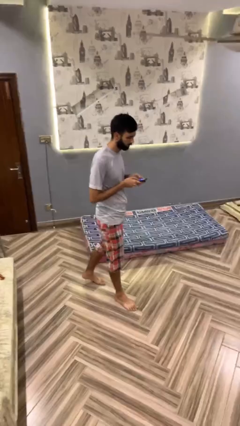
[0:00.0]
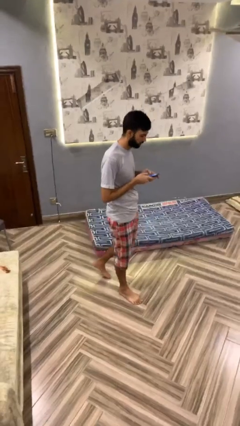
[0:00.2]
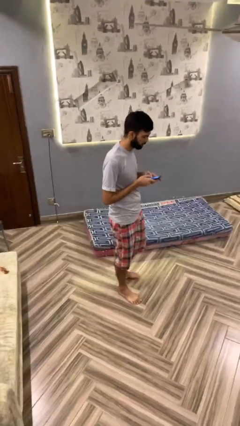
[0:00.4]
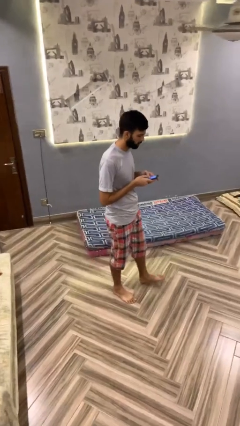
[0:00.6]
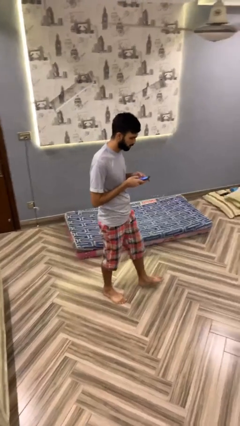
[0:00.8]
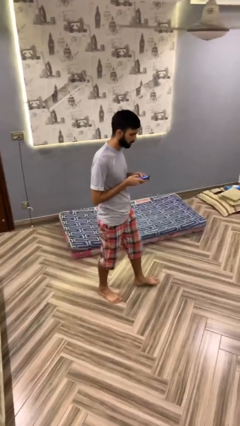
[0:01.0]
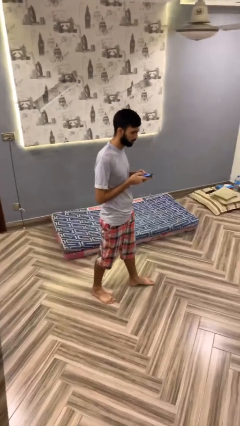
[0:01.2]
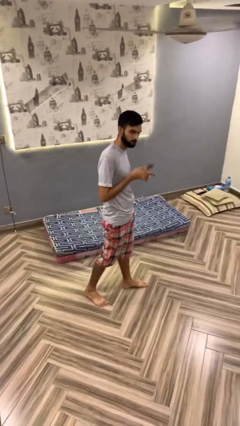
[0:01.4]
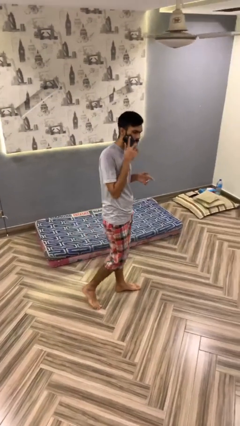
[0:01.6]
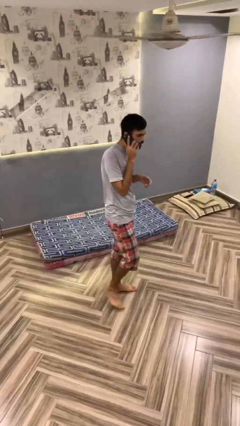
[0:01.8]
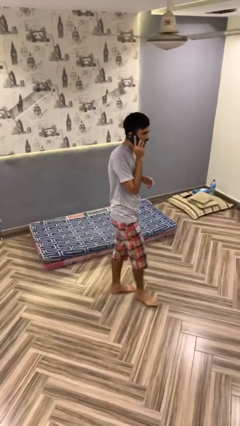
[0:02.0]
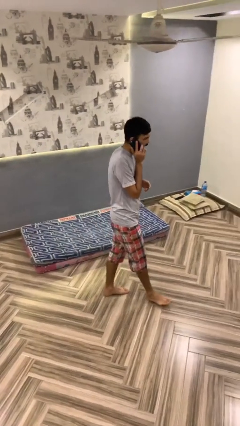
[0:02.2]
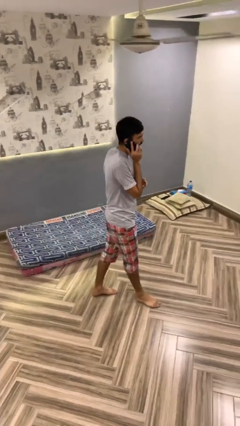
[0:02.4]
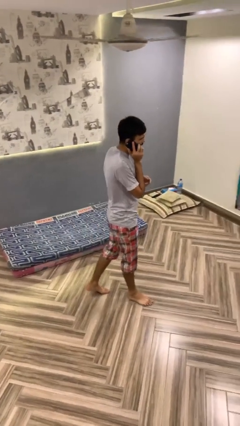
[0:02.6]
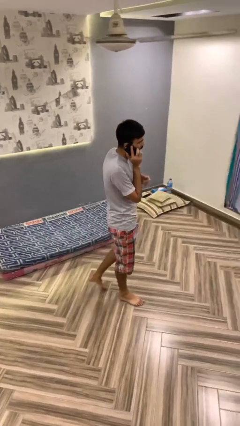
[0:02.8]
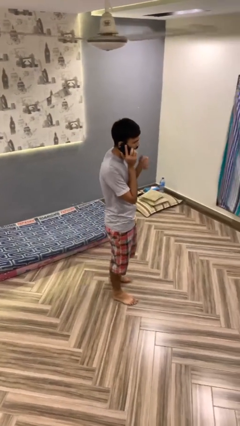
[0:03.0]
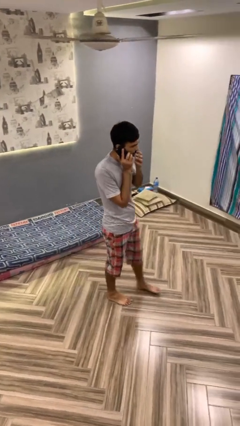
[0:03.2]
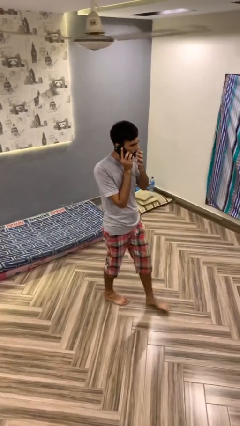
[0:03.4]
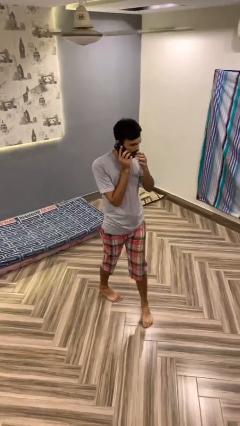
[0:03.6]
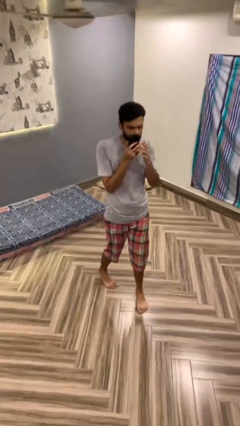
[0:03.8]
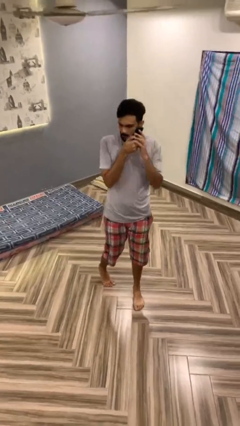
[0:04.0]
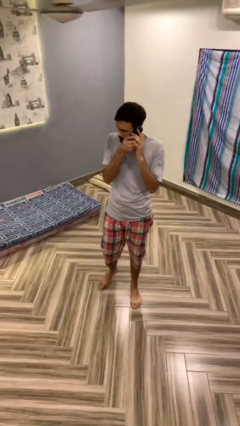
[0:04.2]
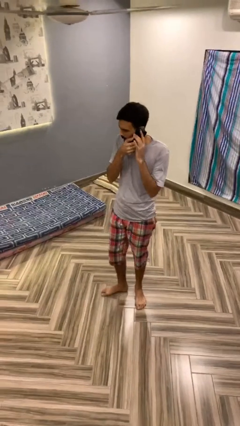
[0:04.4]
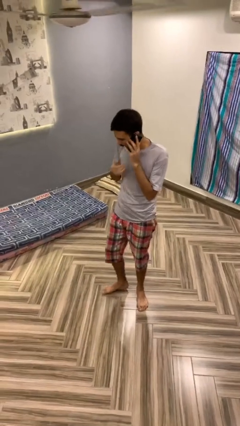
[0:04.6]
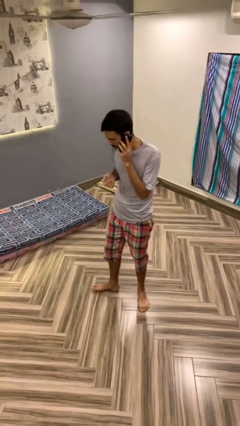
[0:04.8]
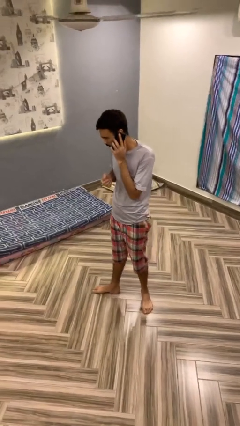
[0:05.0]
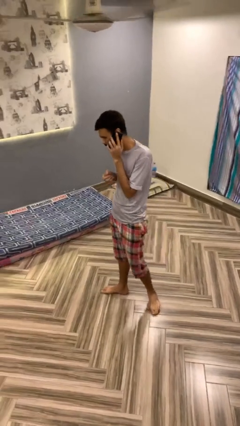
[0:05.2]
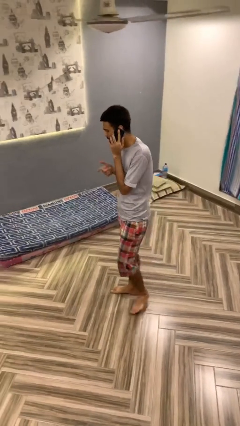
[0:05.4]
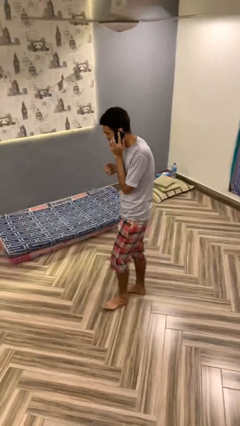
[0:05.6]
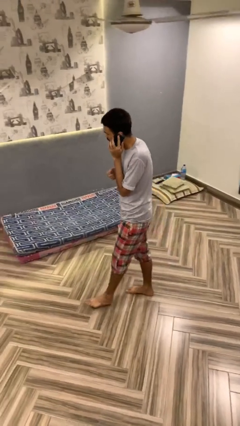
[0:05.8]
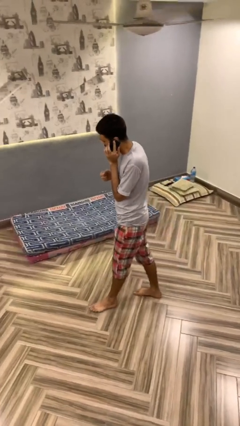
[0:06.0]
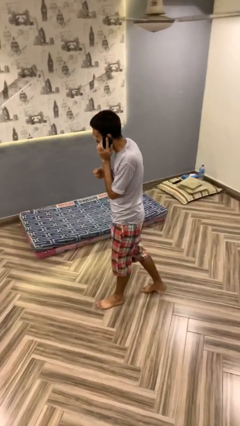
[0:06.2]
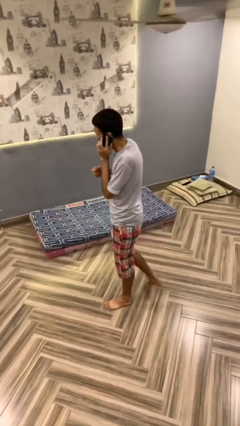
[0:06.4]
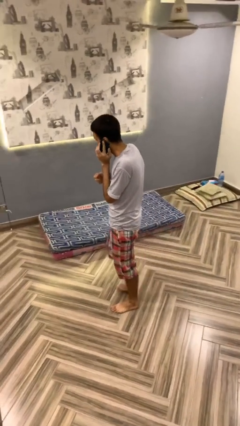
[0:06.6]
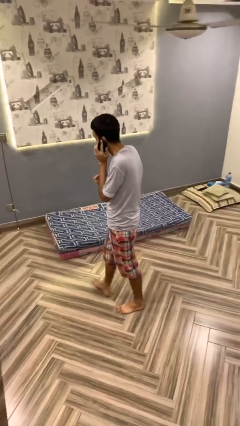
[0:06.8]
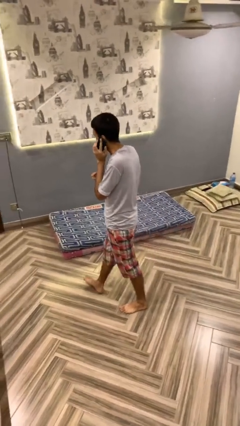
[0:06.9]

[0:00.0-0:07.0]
person talks on phone

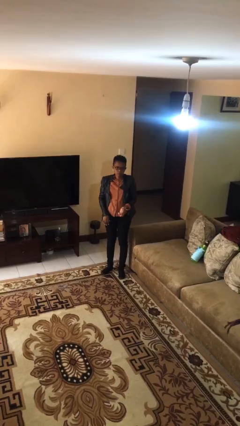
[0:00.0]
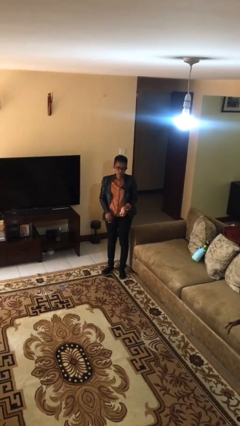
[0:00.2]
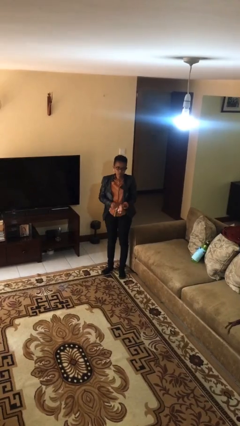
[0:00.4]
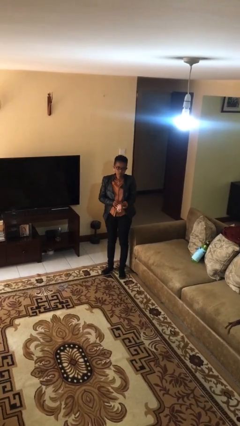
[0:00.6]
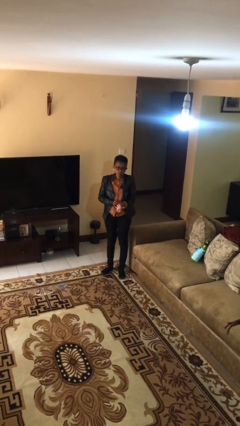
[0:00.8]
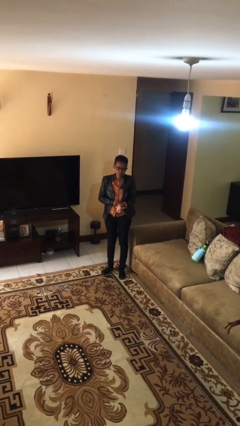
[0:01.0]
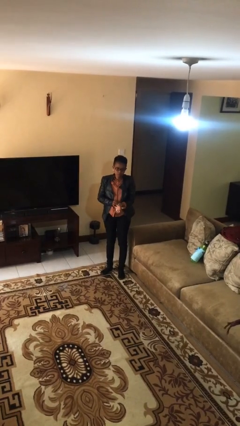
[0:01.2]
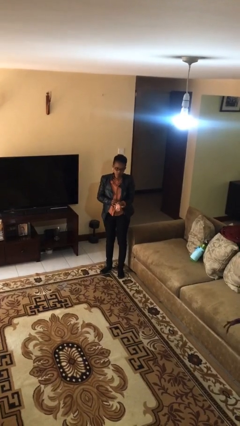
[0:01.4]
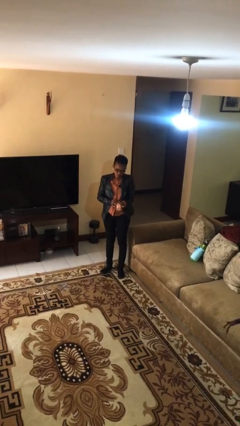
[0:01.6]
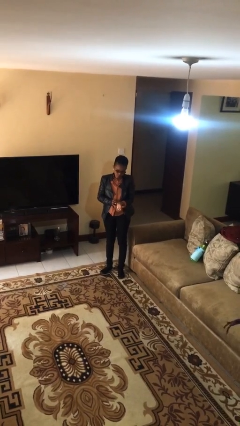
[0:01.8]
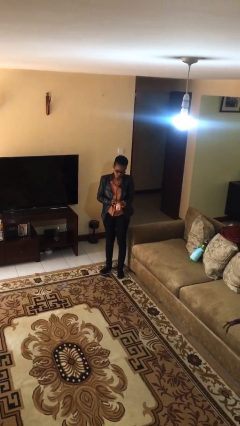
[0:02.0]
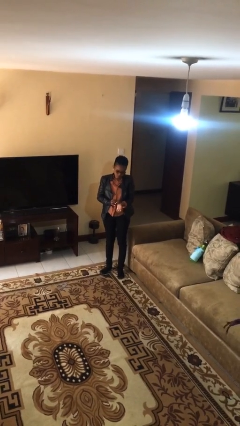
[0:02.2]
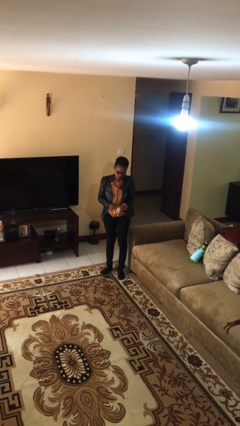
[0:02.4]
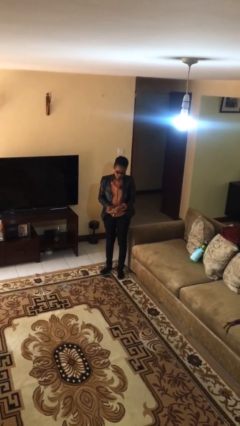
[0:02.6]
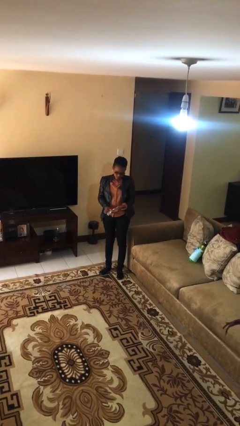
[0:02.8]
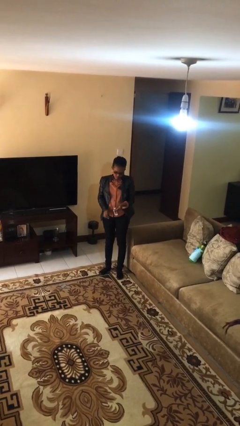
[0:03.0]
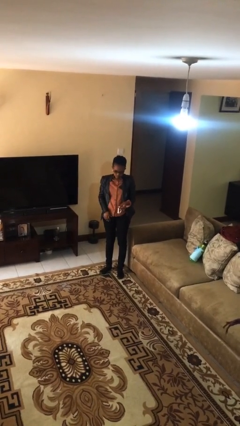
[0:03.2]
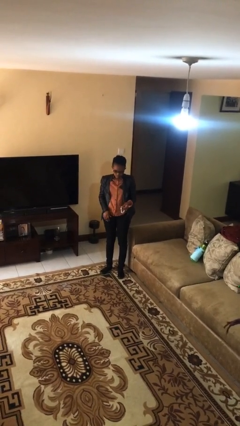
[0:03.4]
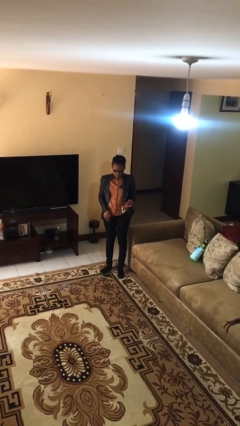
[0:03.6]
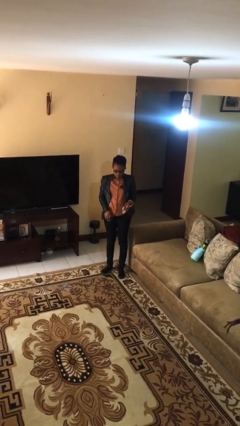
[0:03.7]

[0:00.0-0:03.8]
person takes off wristwatch

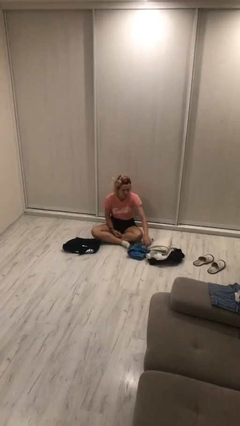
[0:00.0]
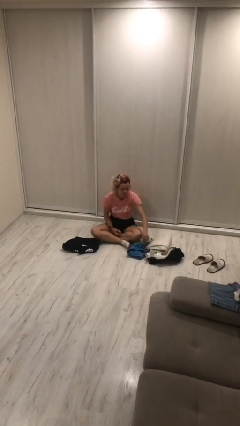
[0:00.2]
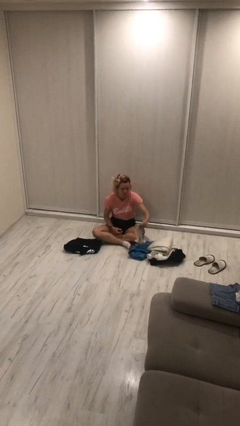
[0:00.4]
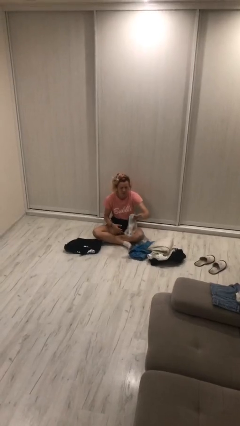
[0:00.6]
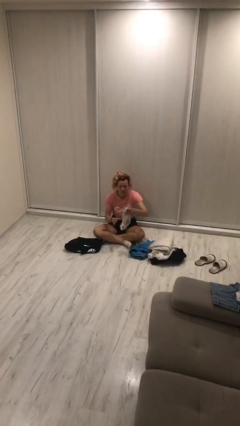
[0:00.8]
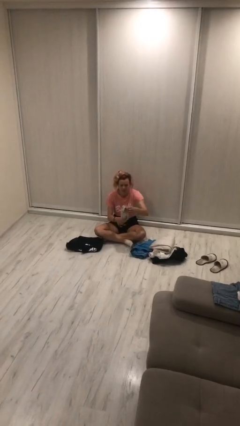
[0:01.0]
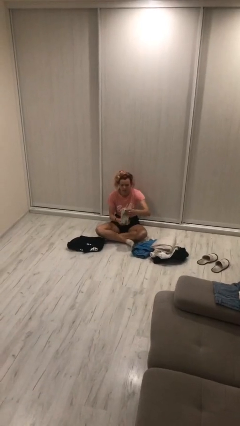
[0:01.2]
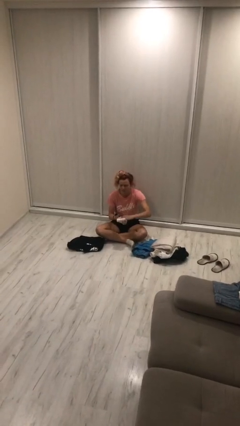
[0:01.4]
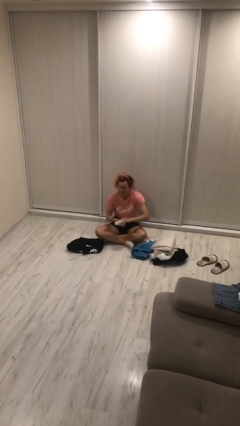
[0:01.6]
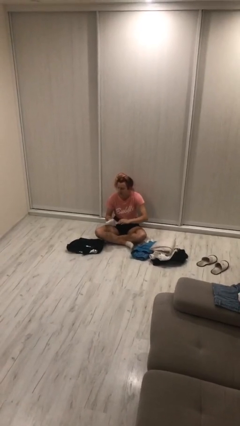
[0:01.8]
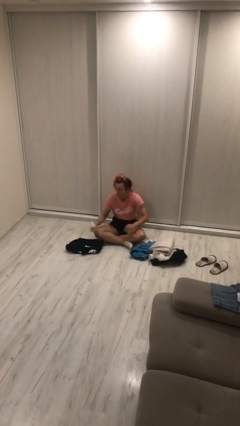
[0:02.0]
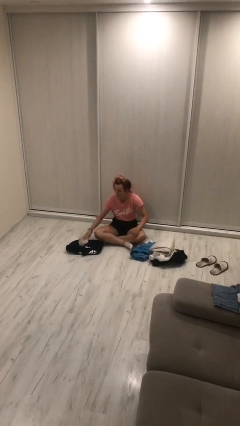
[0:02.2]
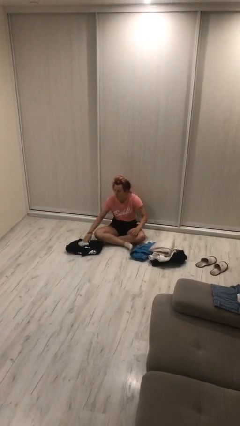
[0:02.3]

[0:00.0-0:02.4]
person folds socks

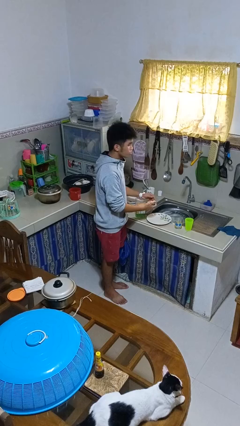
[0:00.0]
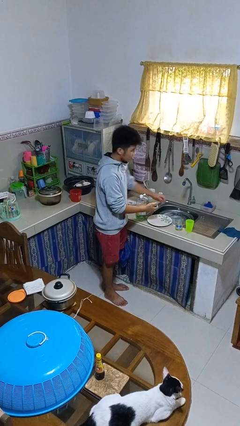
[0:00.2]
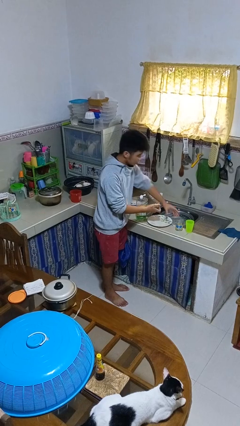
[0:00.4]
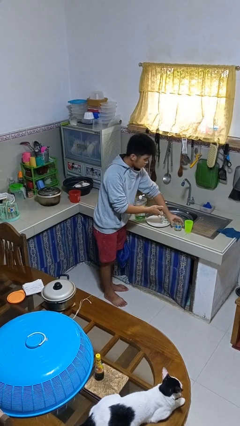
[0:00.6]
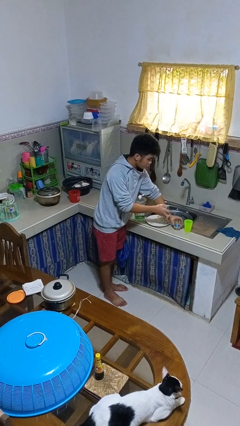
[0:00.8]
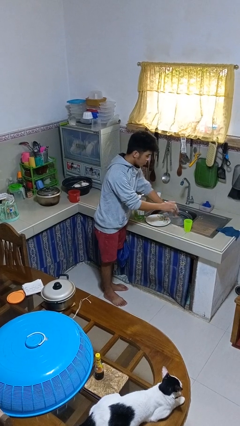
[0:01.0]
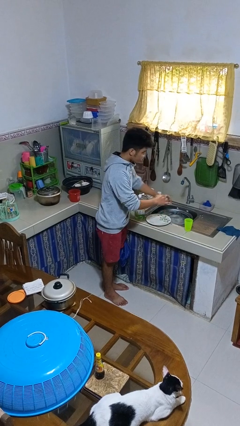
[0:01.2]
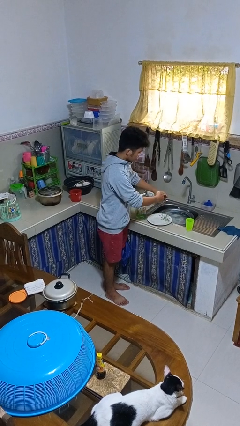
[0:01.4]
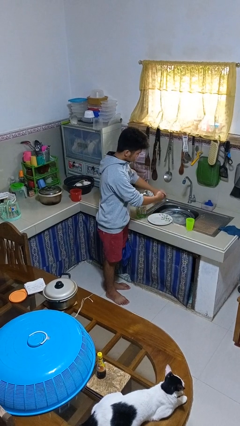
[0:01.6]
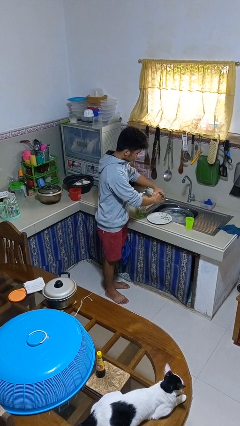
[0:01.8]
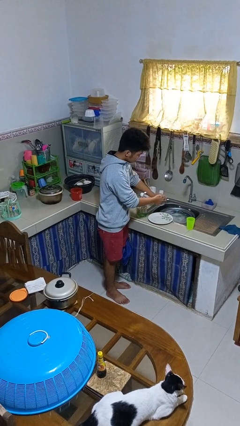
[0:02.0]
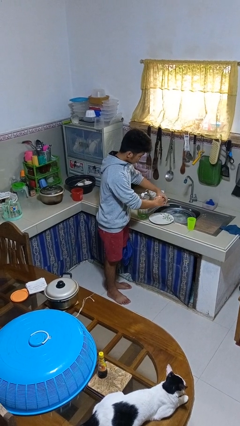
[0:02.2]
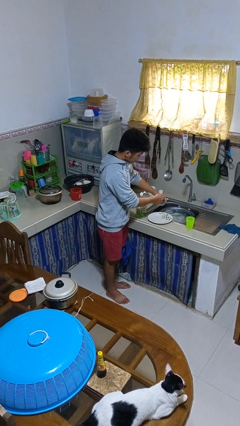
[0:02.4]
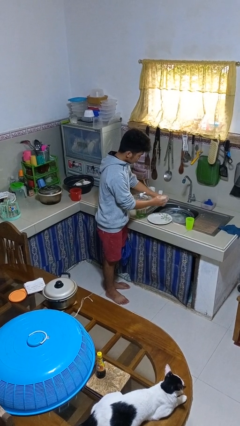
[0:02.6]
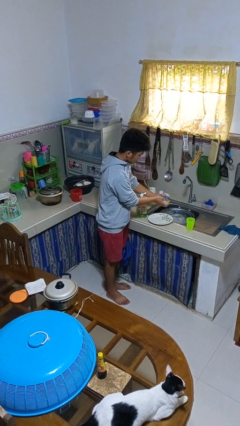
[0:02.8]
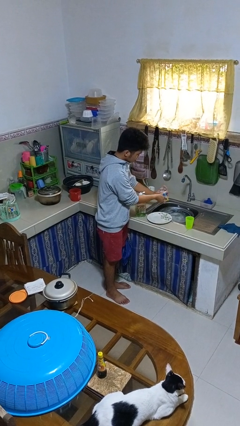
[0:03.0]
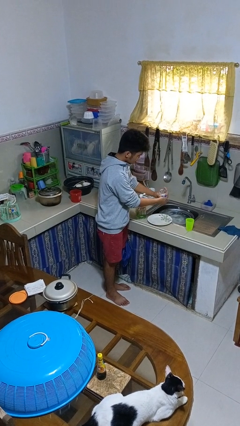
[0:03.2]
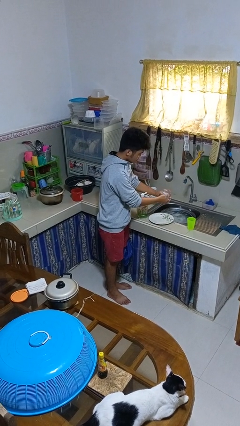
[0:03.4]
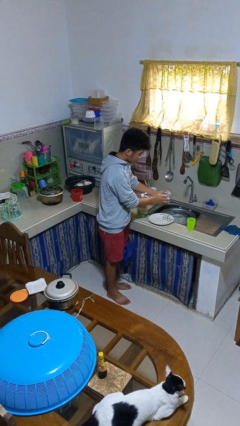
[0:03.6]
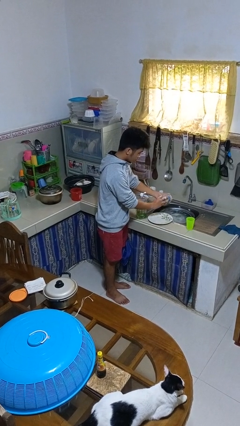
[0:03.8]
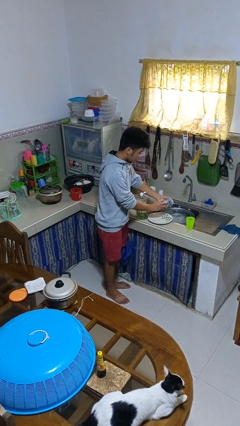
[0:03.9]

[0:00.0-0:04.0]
person washes dish

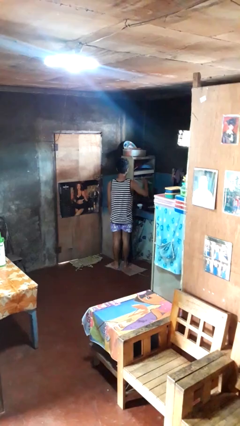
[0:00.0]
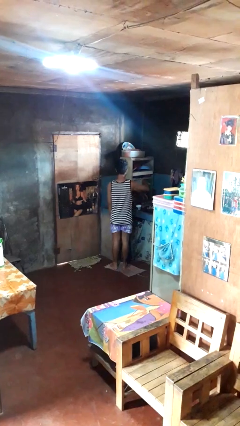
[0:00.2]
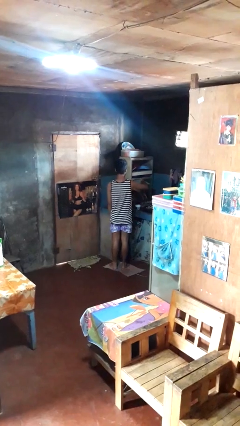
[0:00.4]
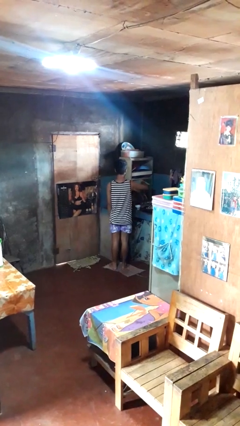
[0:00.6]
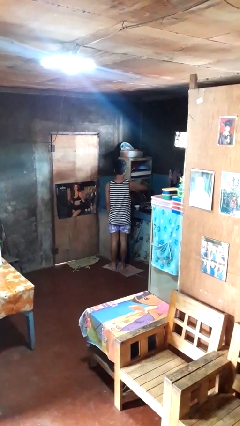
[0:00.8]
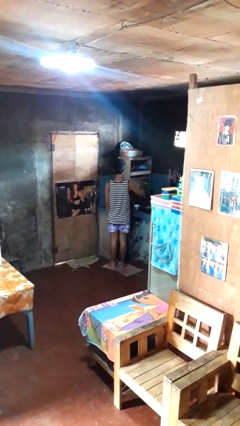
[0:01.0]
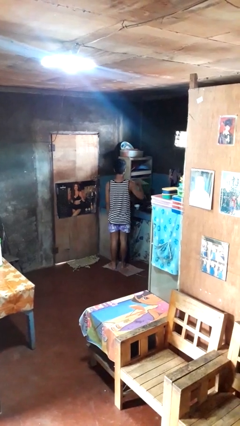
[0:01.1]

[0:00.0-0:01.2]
person puts object into kitchen drawer
